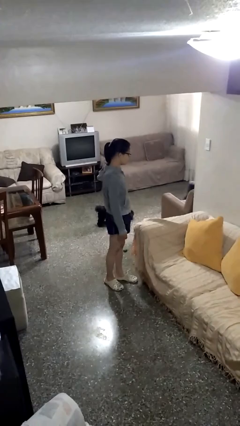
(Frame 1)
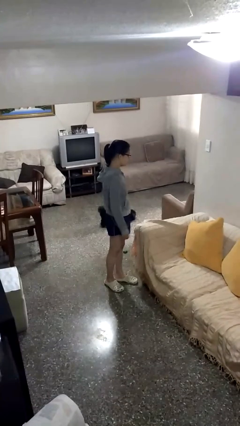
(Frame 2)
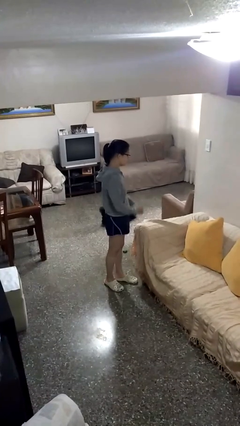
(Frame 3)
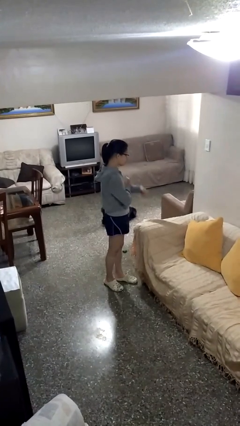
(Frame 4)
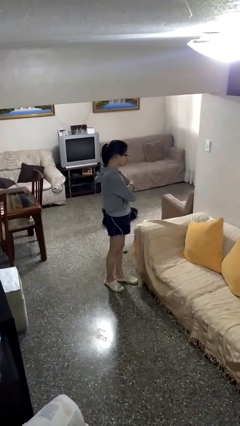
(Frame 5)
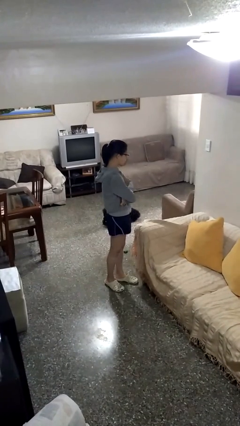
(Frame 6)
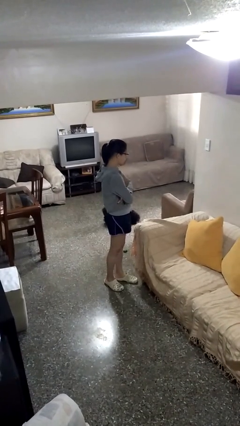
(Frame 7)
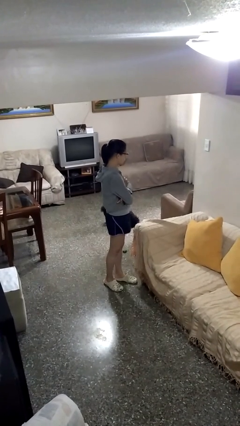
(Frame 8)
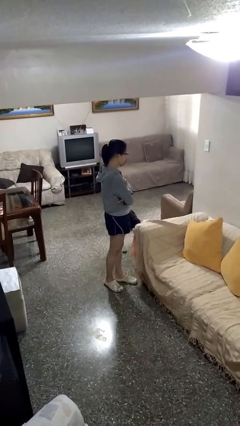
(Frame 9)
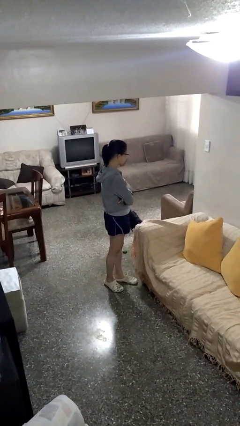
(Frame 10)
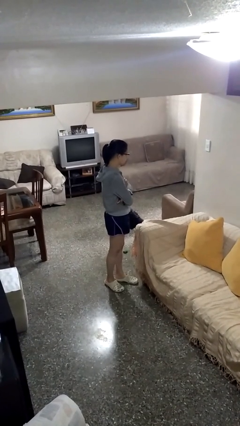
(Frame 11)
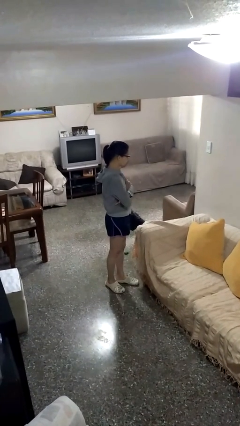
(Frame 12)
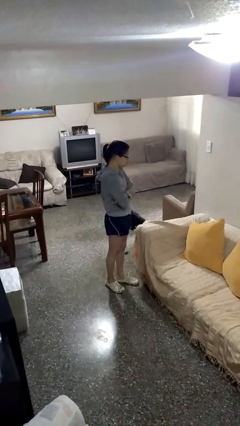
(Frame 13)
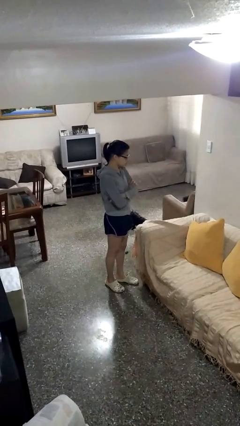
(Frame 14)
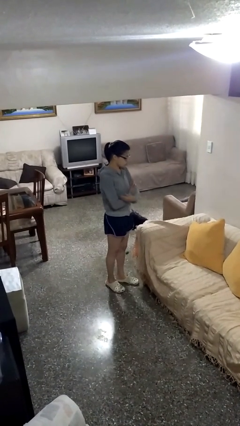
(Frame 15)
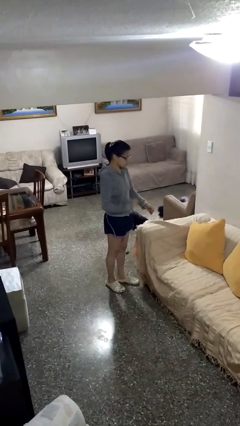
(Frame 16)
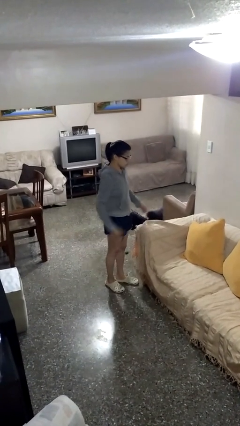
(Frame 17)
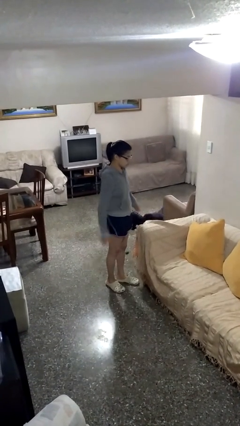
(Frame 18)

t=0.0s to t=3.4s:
person crosses arms

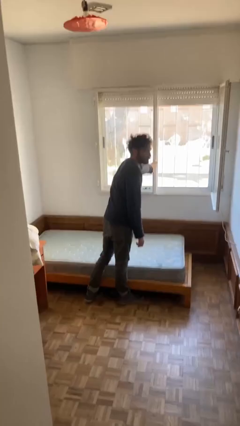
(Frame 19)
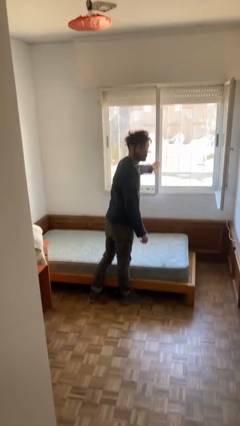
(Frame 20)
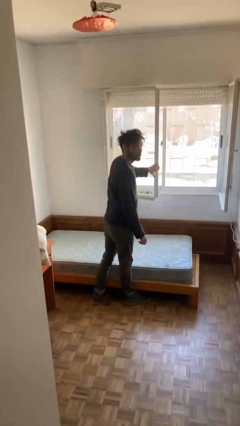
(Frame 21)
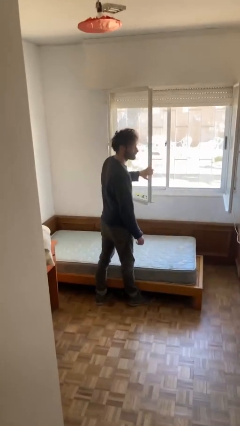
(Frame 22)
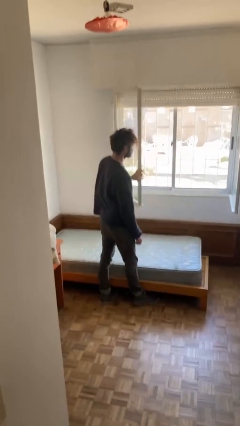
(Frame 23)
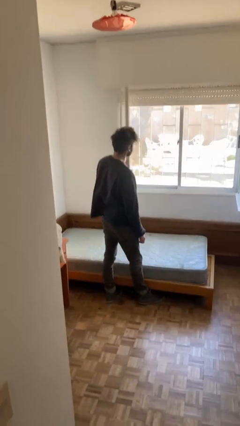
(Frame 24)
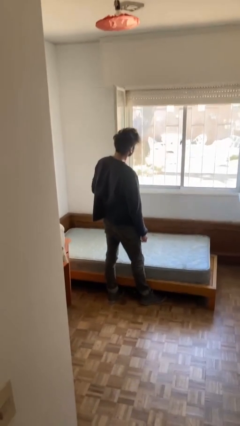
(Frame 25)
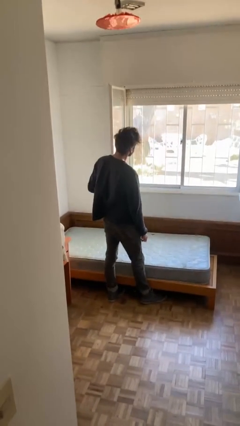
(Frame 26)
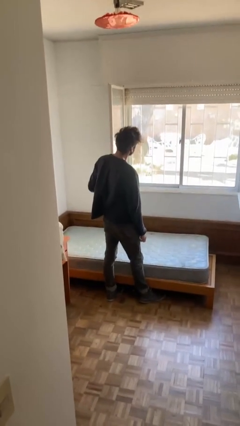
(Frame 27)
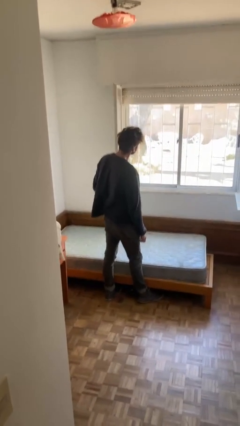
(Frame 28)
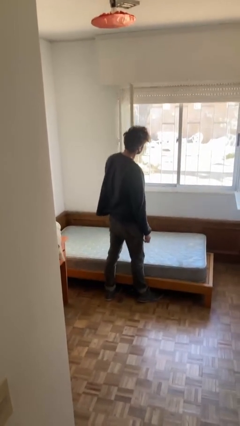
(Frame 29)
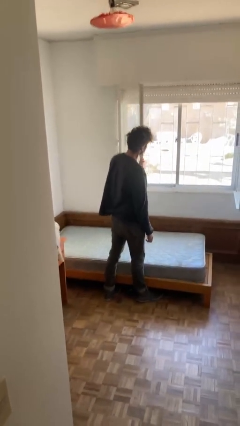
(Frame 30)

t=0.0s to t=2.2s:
person opens home window

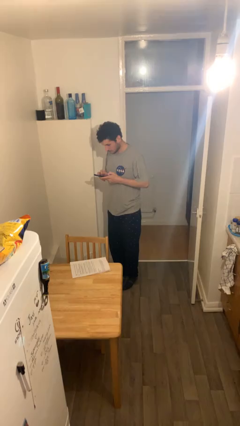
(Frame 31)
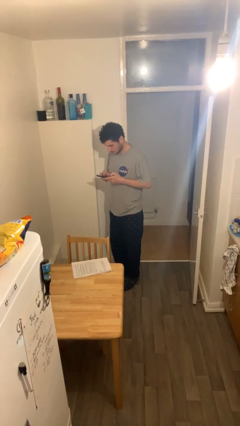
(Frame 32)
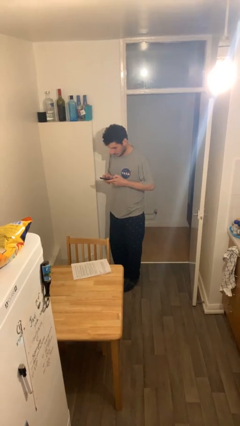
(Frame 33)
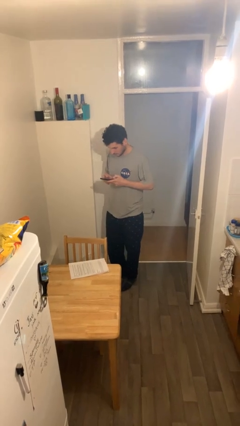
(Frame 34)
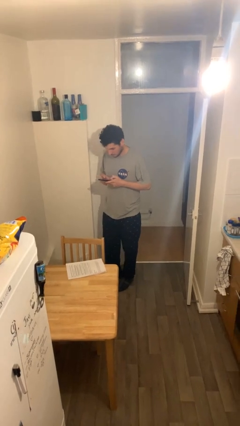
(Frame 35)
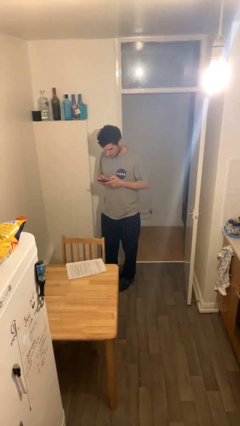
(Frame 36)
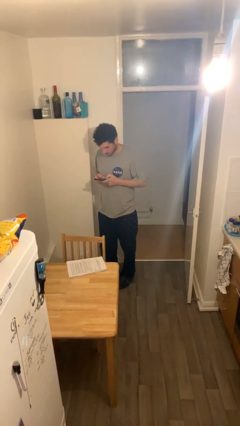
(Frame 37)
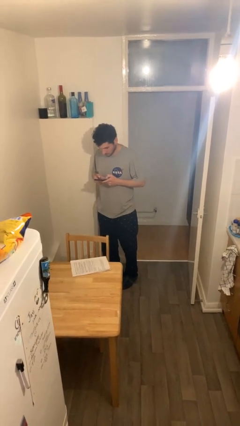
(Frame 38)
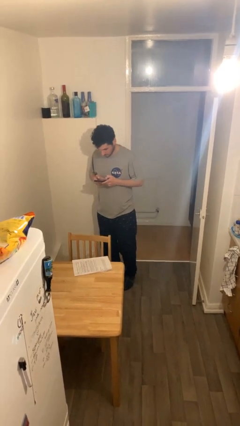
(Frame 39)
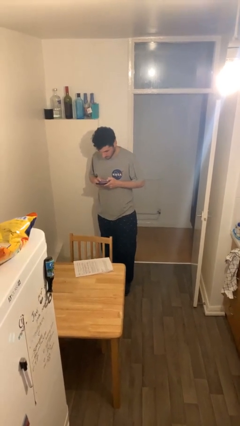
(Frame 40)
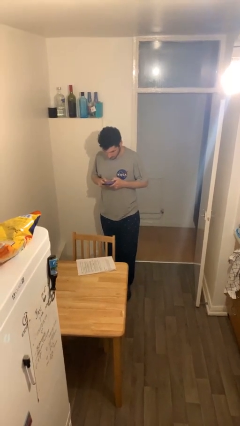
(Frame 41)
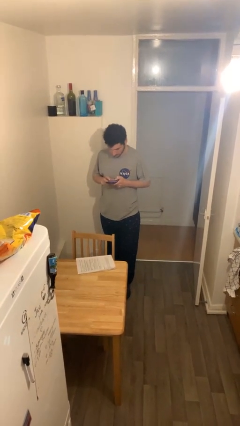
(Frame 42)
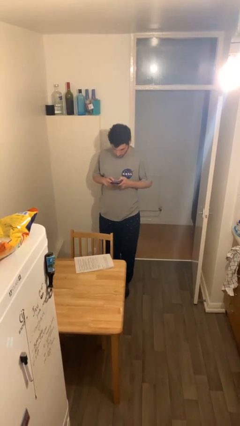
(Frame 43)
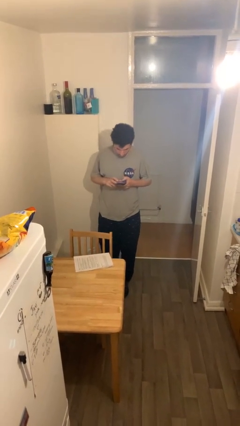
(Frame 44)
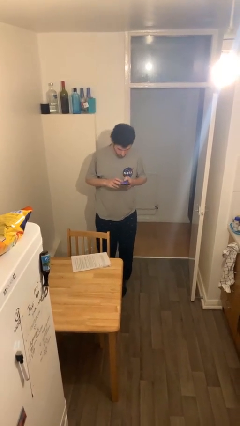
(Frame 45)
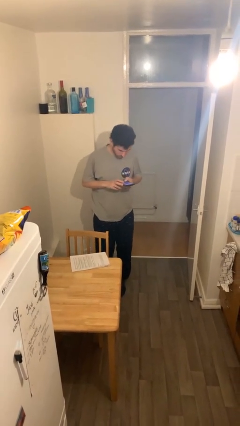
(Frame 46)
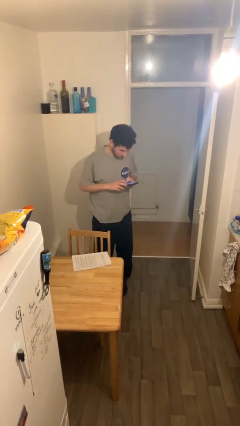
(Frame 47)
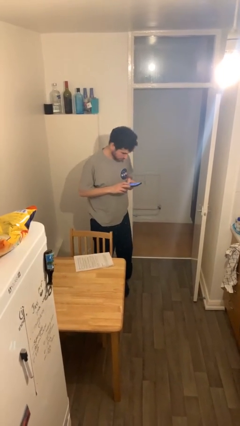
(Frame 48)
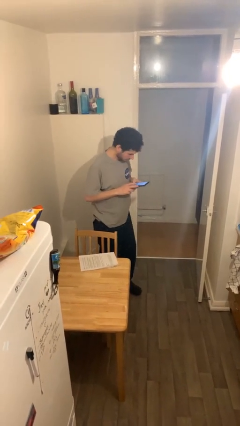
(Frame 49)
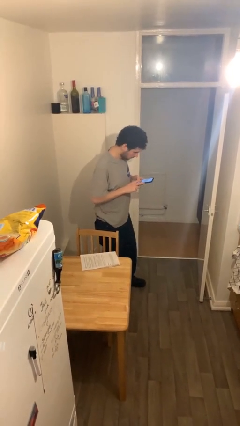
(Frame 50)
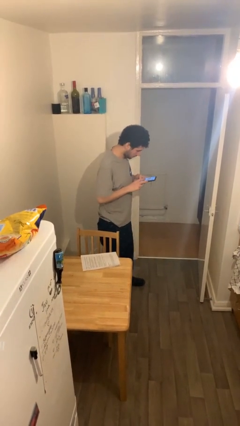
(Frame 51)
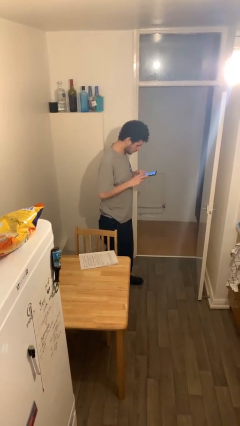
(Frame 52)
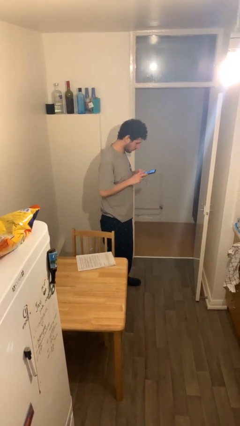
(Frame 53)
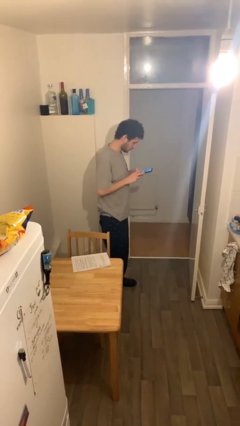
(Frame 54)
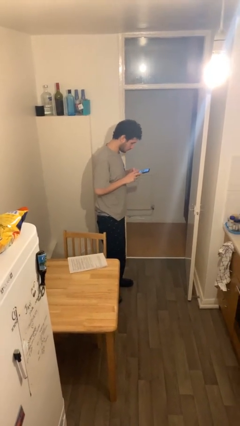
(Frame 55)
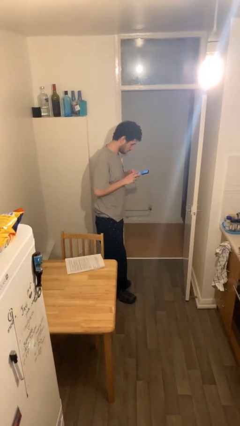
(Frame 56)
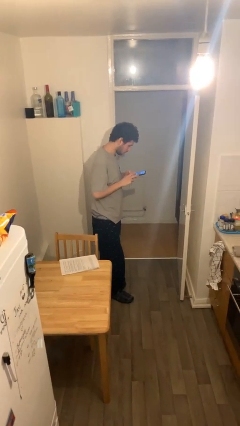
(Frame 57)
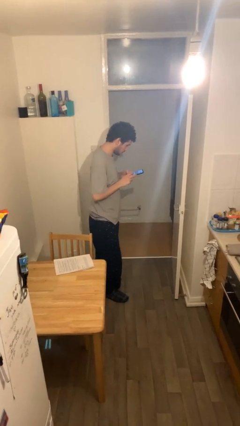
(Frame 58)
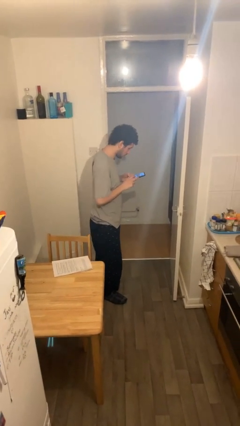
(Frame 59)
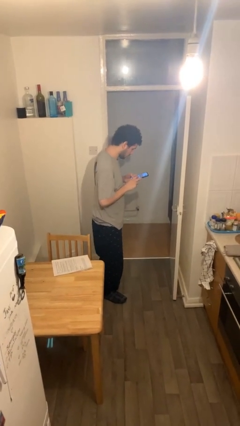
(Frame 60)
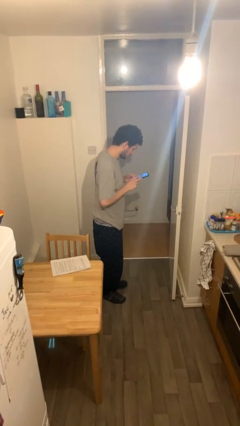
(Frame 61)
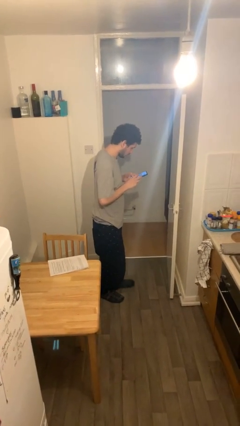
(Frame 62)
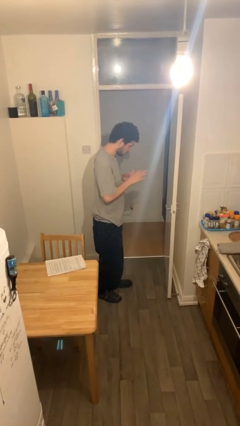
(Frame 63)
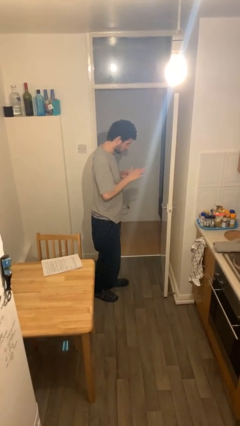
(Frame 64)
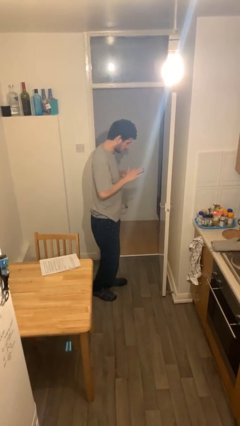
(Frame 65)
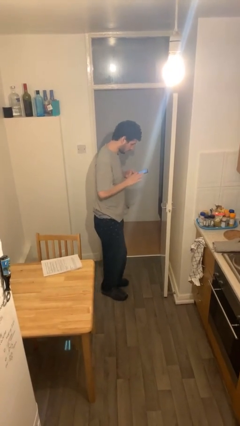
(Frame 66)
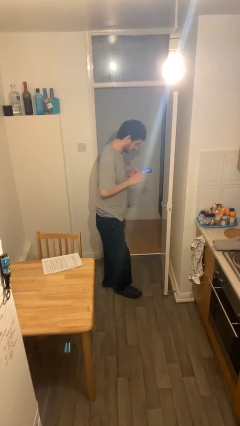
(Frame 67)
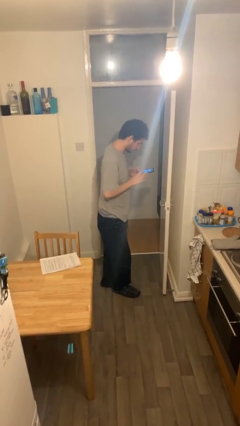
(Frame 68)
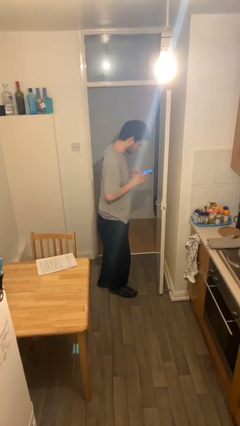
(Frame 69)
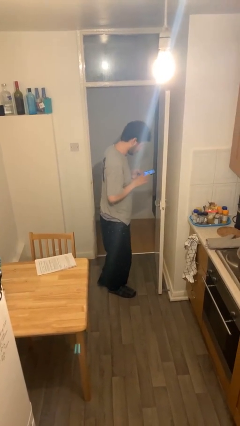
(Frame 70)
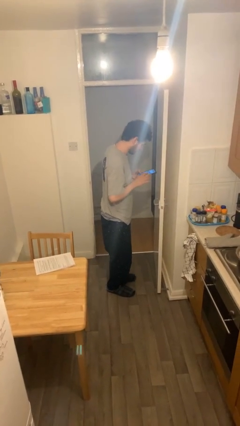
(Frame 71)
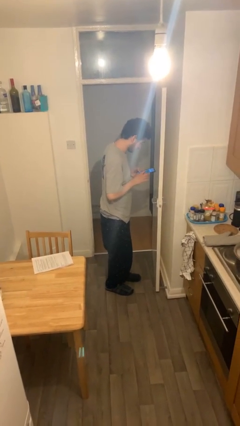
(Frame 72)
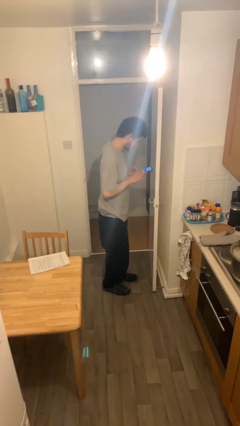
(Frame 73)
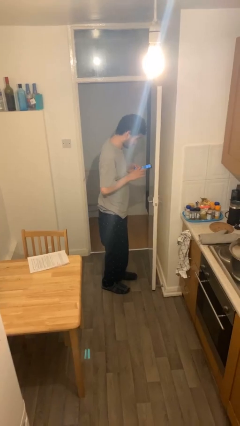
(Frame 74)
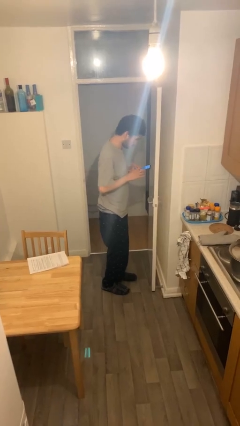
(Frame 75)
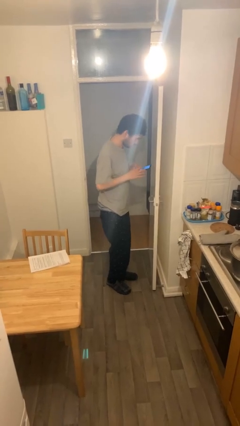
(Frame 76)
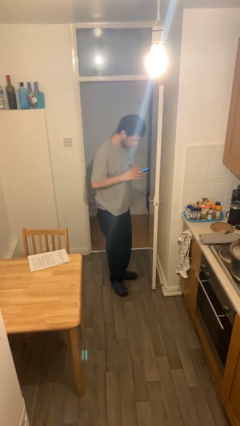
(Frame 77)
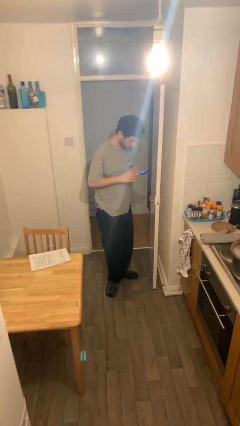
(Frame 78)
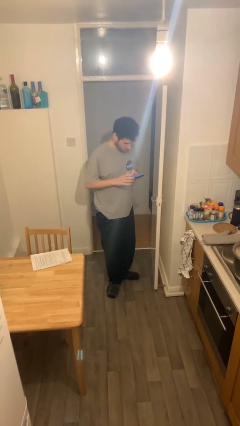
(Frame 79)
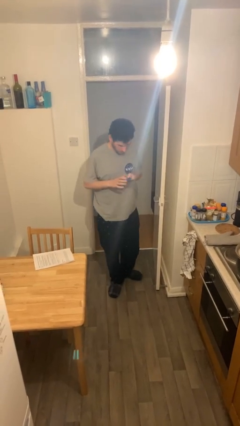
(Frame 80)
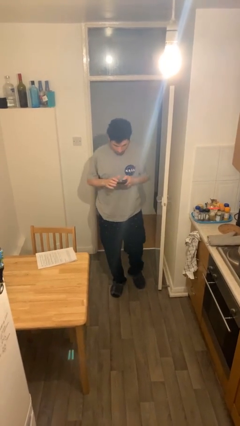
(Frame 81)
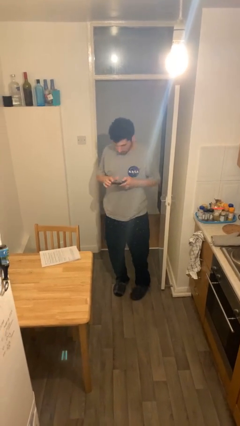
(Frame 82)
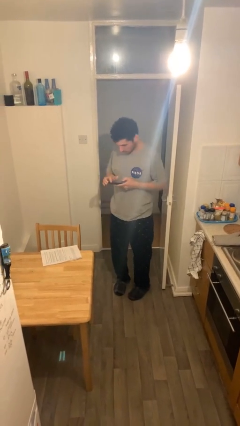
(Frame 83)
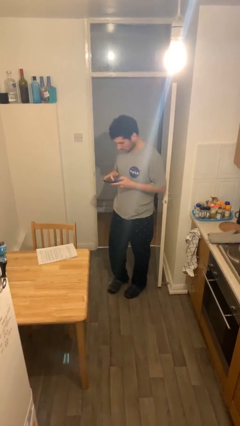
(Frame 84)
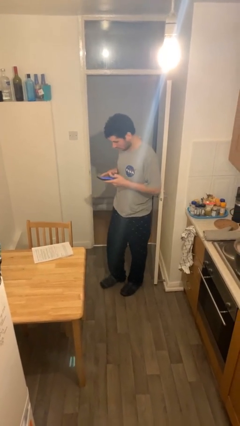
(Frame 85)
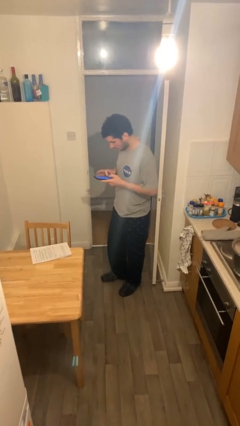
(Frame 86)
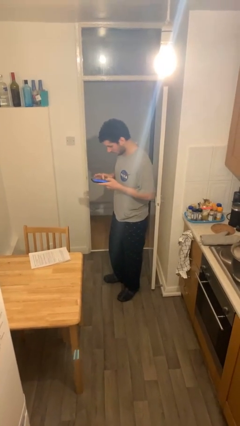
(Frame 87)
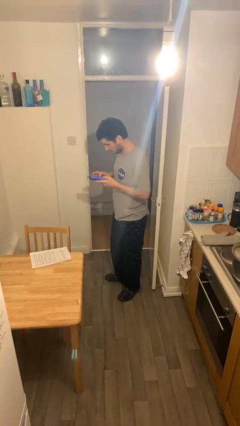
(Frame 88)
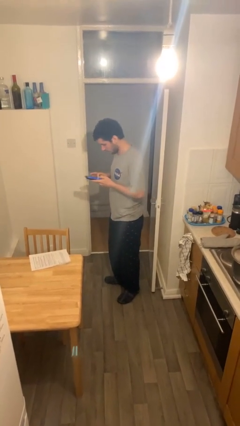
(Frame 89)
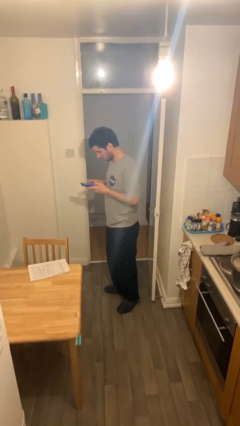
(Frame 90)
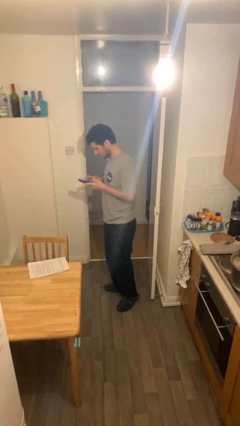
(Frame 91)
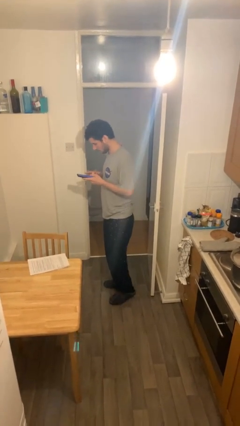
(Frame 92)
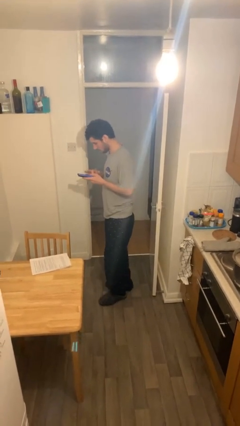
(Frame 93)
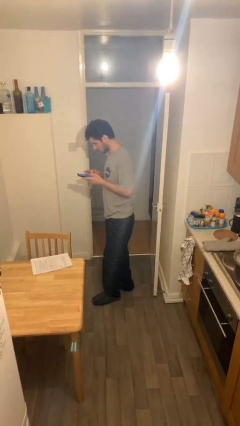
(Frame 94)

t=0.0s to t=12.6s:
person texts on phone
